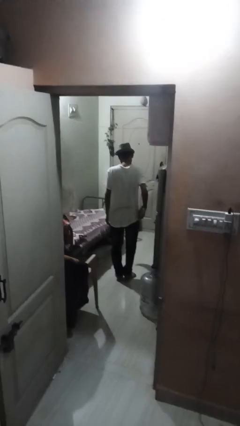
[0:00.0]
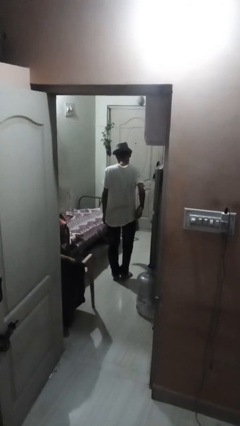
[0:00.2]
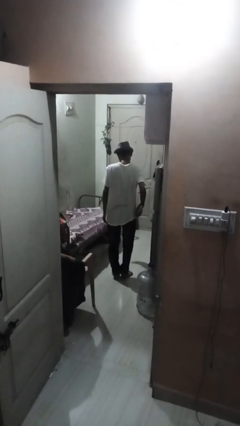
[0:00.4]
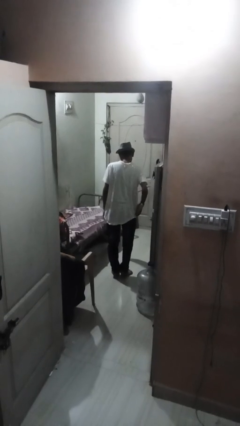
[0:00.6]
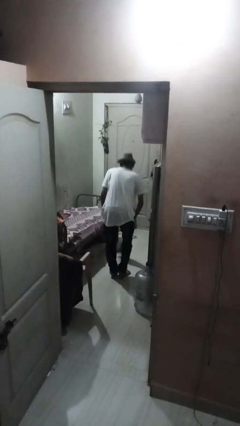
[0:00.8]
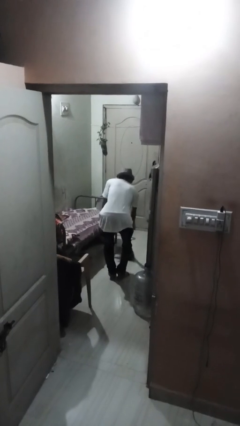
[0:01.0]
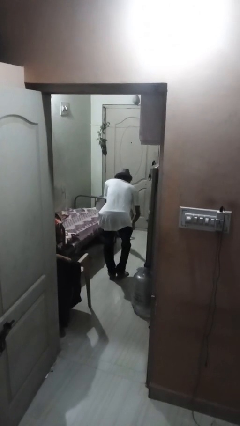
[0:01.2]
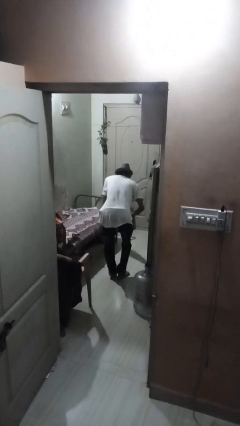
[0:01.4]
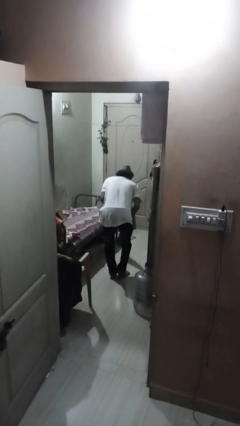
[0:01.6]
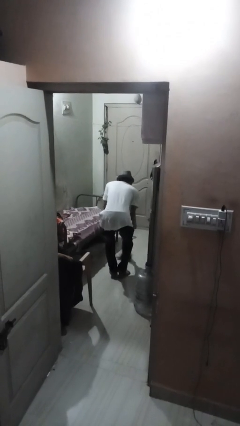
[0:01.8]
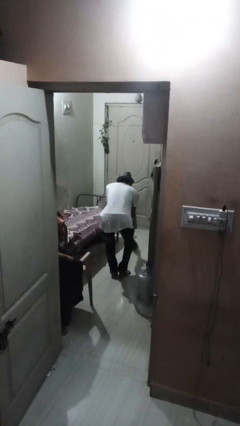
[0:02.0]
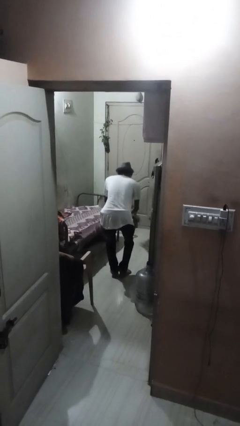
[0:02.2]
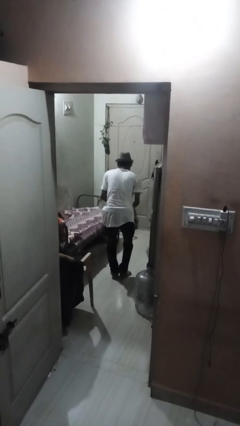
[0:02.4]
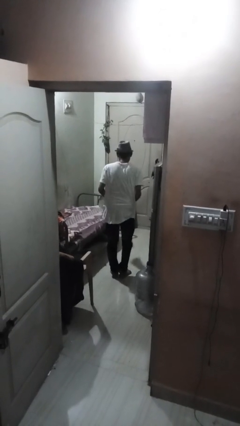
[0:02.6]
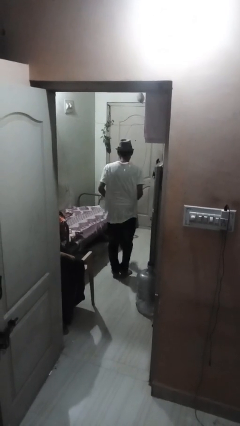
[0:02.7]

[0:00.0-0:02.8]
person mops

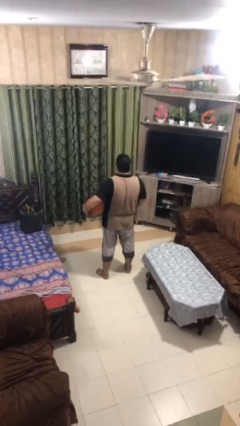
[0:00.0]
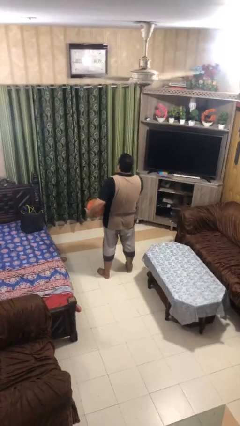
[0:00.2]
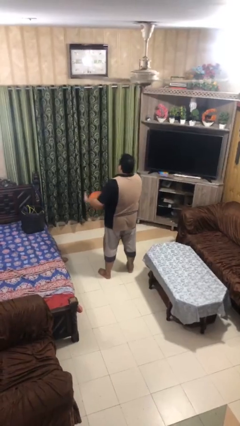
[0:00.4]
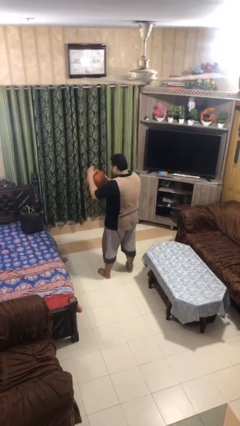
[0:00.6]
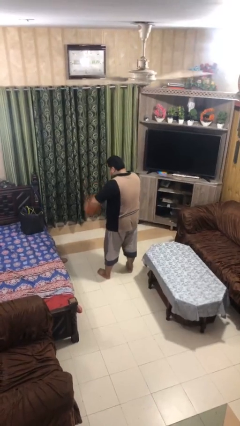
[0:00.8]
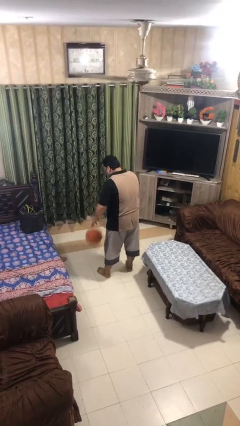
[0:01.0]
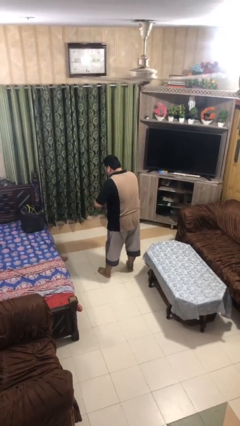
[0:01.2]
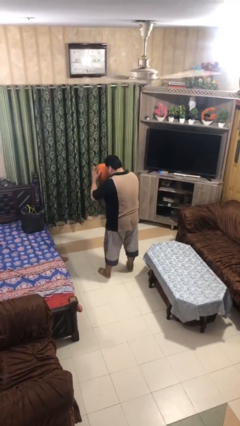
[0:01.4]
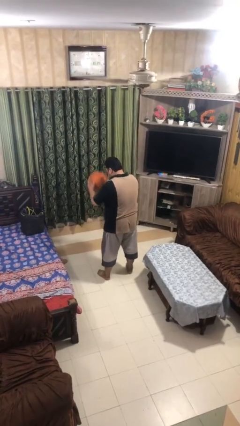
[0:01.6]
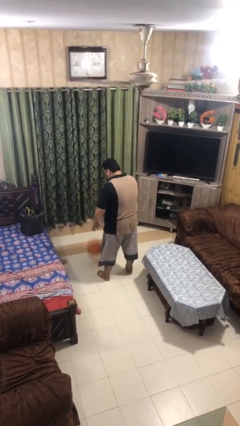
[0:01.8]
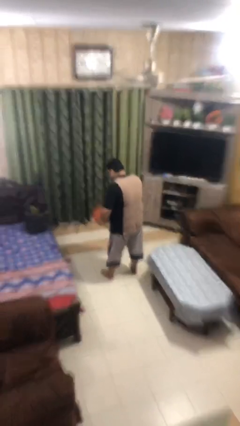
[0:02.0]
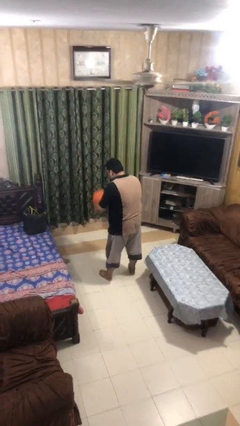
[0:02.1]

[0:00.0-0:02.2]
person bounces ball on floor

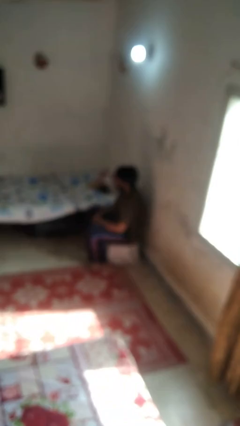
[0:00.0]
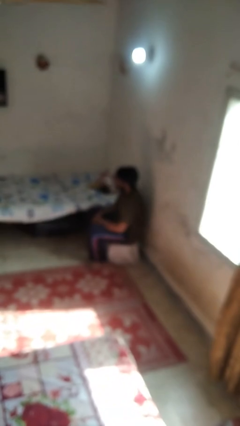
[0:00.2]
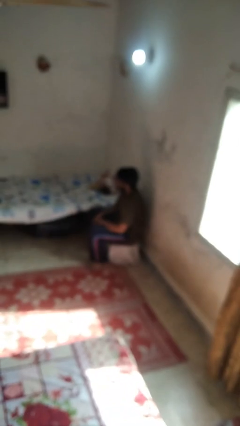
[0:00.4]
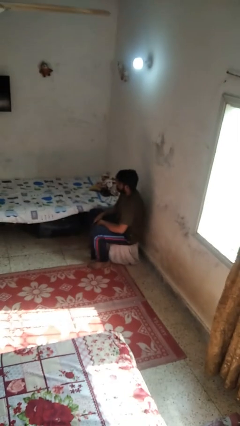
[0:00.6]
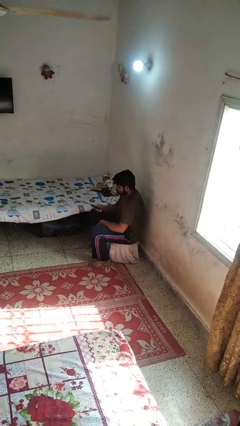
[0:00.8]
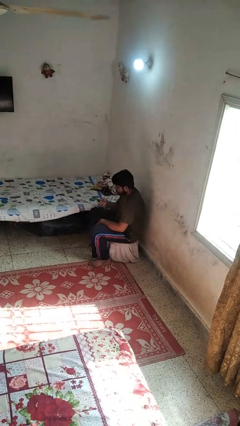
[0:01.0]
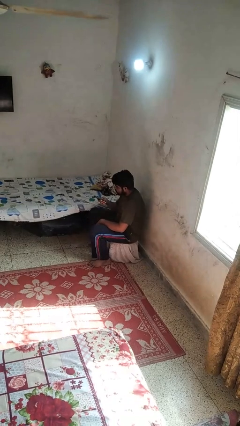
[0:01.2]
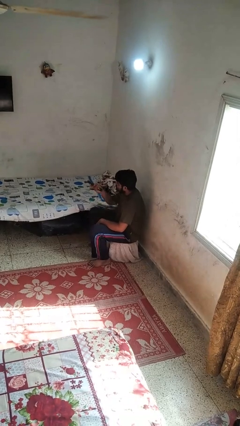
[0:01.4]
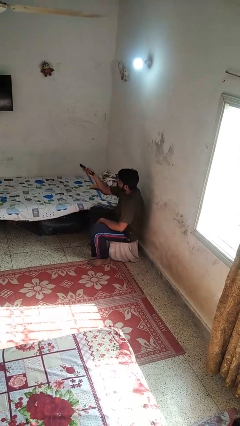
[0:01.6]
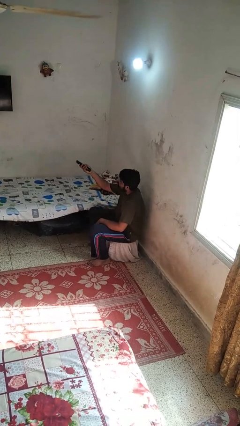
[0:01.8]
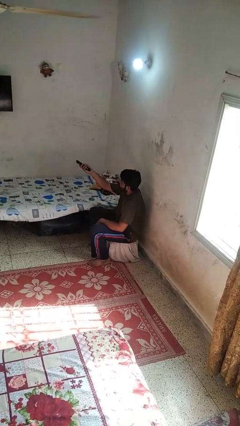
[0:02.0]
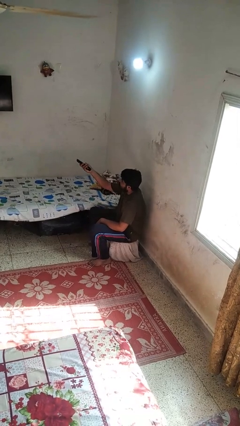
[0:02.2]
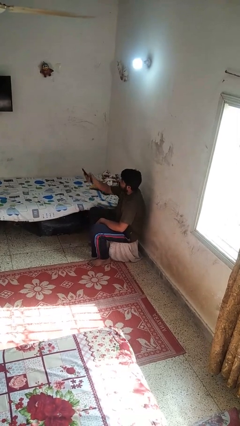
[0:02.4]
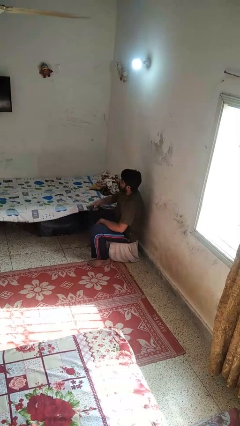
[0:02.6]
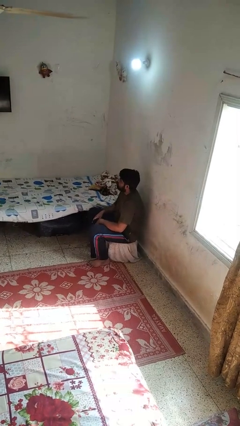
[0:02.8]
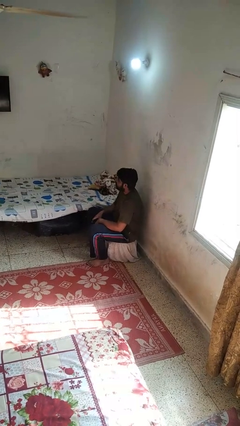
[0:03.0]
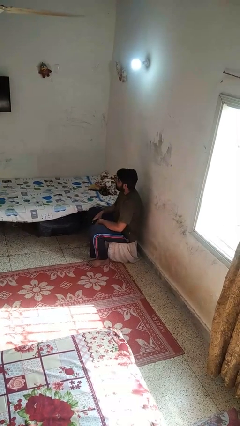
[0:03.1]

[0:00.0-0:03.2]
person uses television remote

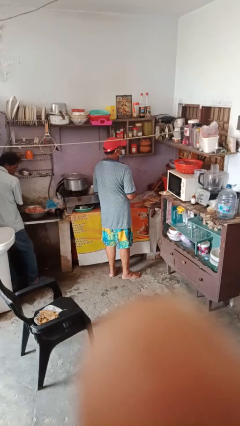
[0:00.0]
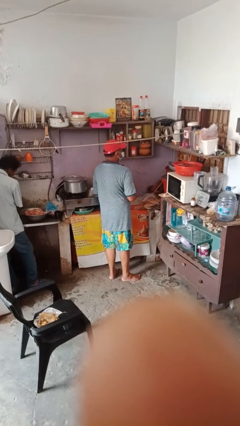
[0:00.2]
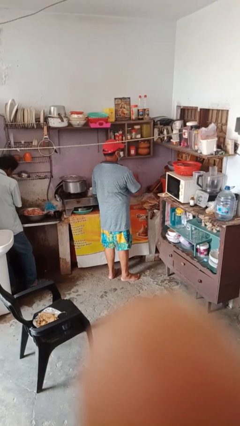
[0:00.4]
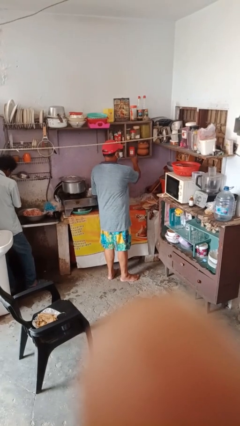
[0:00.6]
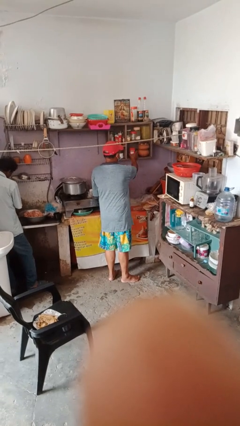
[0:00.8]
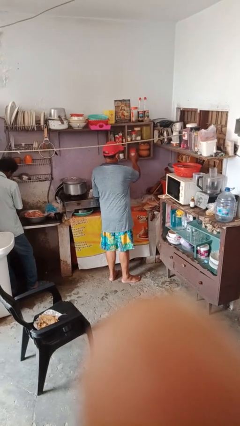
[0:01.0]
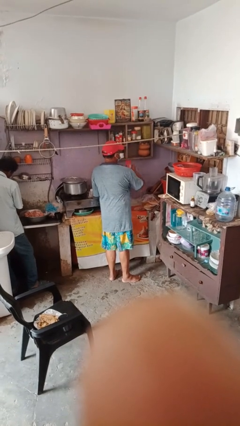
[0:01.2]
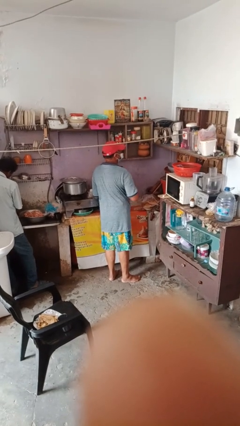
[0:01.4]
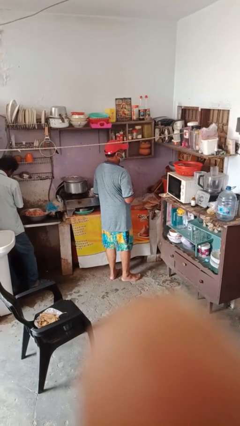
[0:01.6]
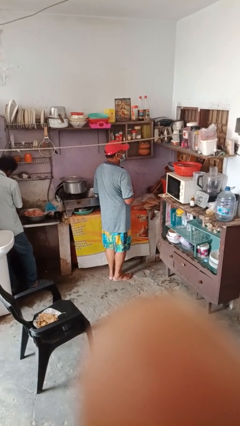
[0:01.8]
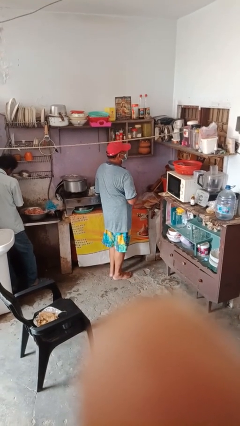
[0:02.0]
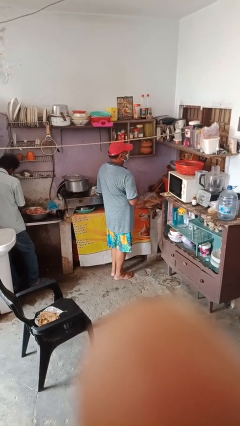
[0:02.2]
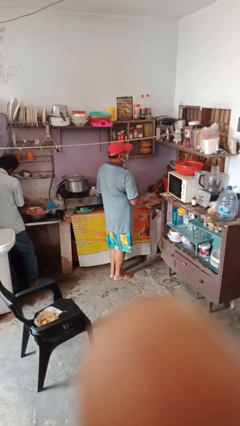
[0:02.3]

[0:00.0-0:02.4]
person picks up object from shelf

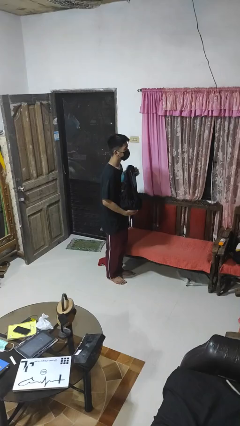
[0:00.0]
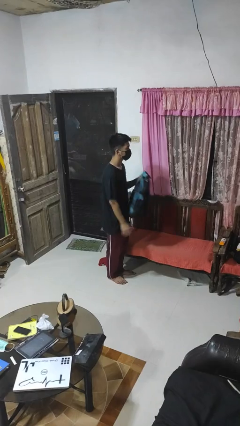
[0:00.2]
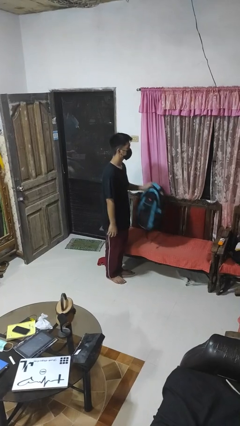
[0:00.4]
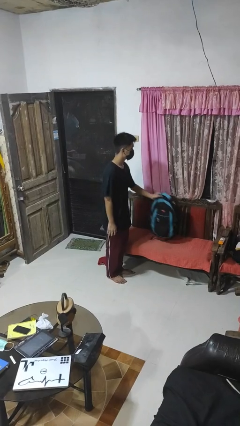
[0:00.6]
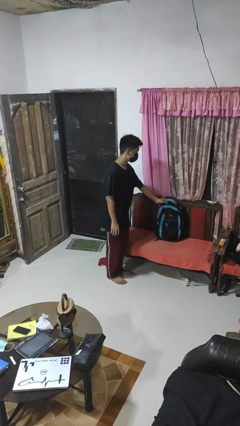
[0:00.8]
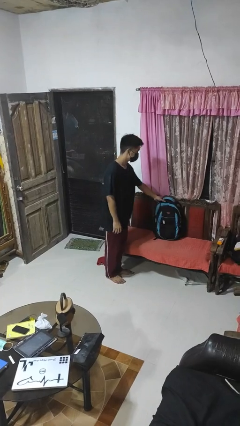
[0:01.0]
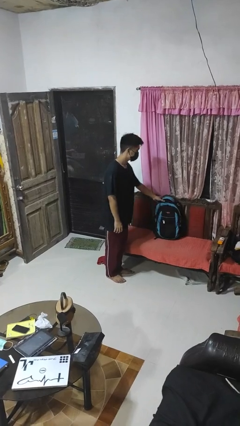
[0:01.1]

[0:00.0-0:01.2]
person puts down object on couch

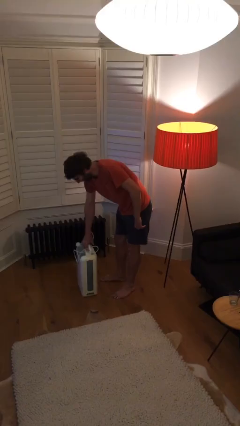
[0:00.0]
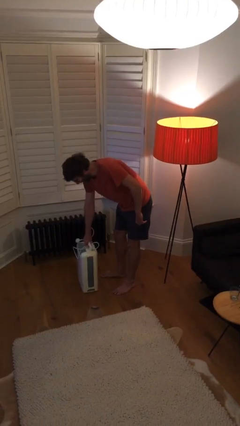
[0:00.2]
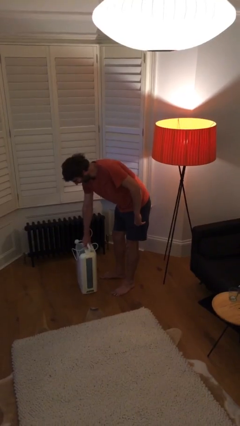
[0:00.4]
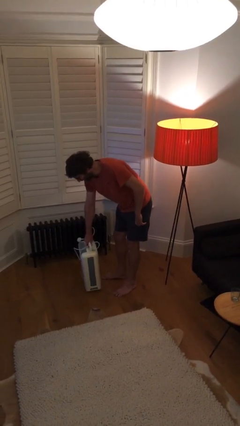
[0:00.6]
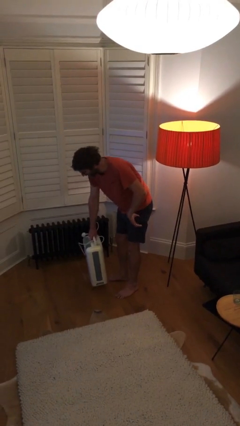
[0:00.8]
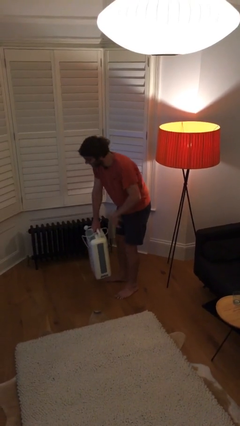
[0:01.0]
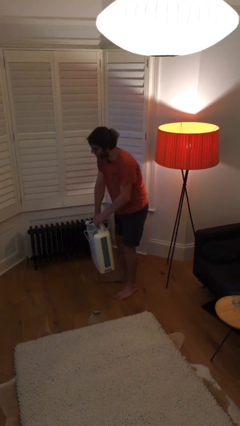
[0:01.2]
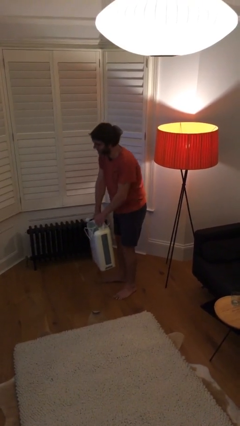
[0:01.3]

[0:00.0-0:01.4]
person picks up object from floor

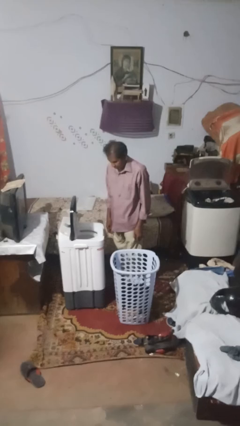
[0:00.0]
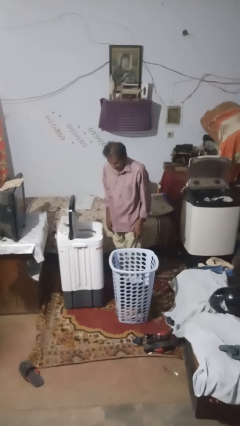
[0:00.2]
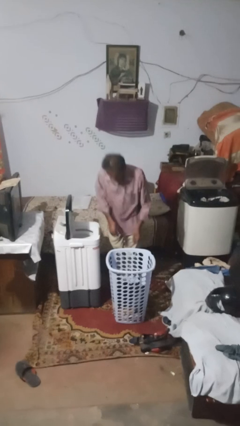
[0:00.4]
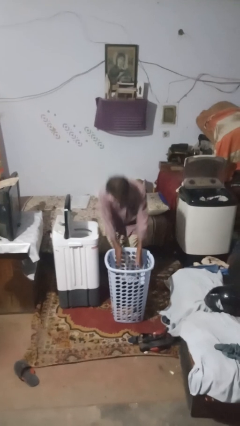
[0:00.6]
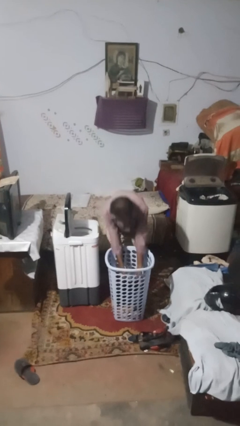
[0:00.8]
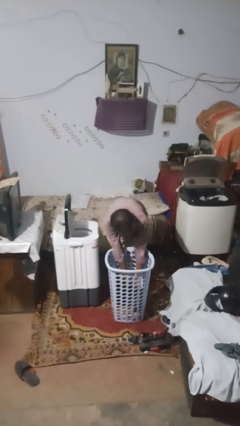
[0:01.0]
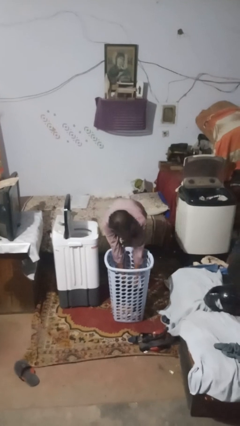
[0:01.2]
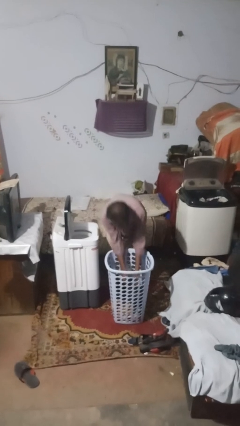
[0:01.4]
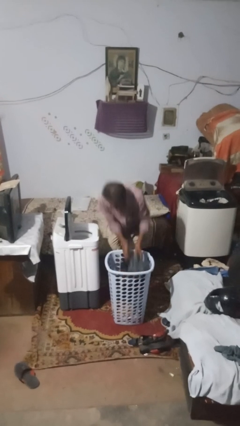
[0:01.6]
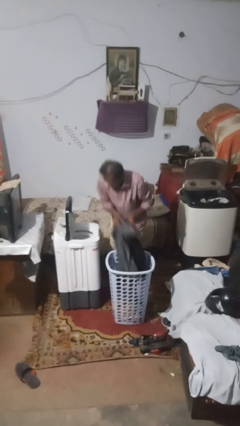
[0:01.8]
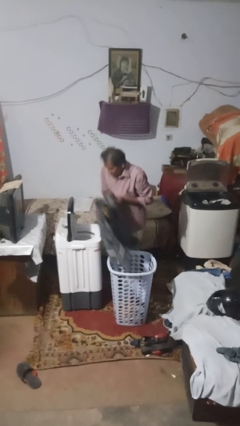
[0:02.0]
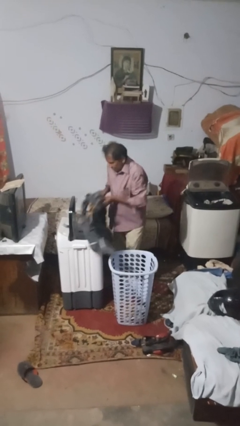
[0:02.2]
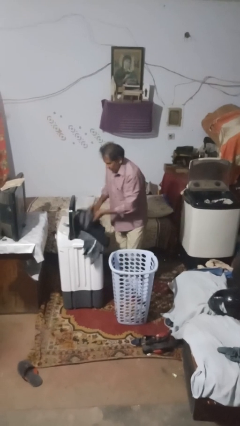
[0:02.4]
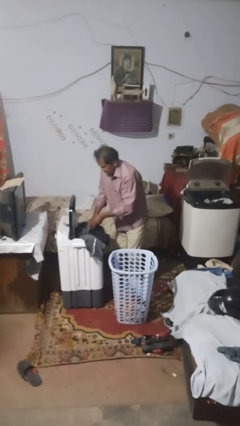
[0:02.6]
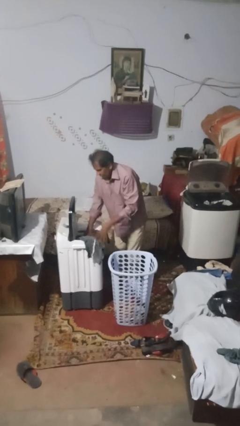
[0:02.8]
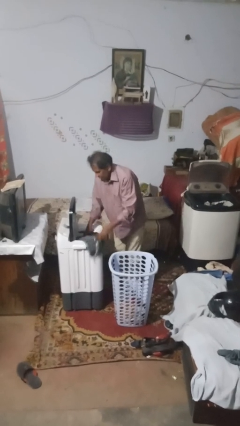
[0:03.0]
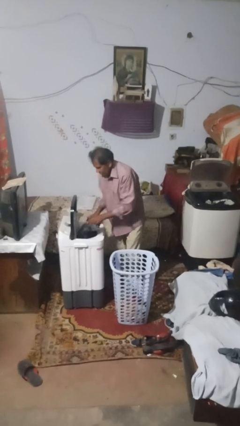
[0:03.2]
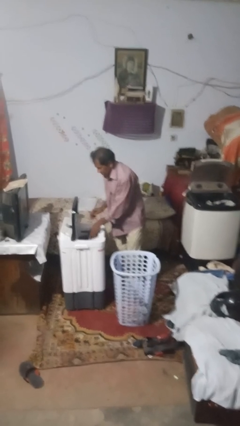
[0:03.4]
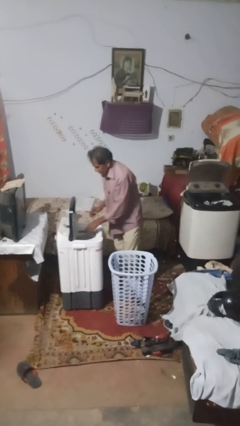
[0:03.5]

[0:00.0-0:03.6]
person unloads dryer

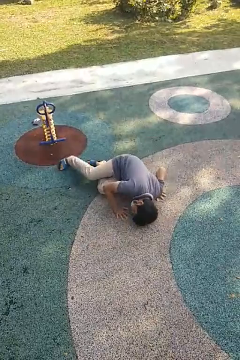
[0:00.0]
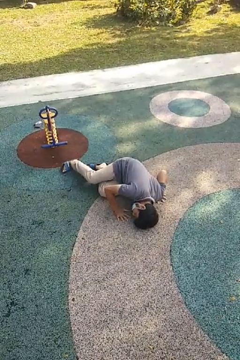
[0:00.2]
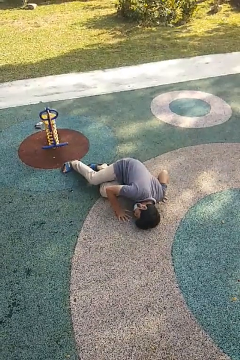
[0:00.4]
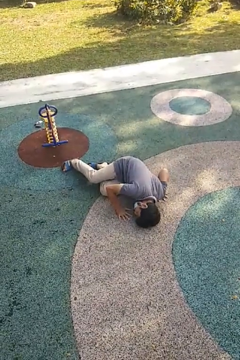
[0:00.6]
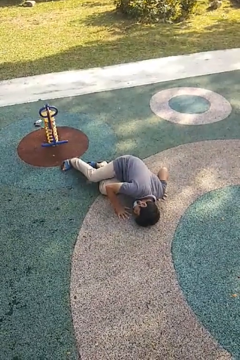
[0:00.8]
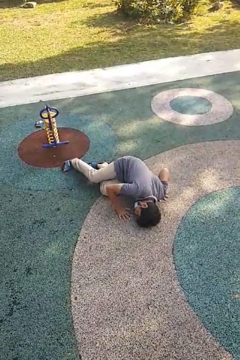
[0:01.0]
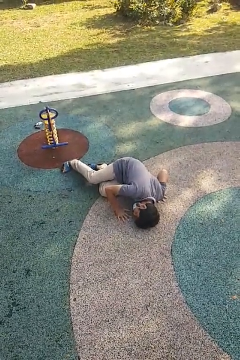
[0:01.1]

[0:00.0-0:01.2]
person lies down on floor
